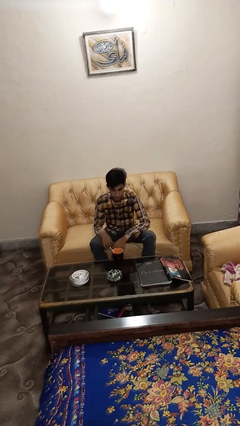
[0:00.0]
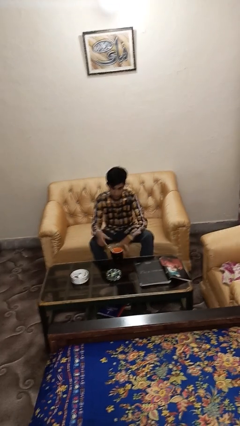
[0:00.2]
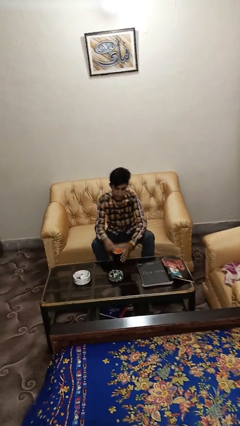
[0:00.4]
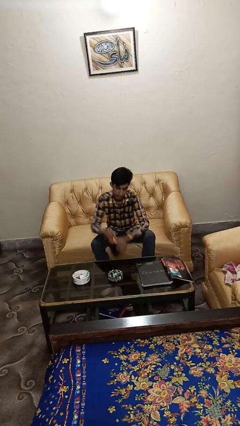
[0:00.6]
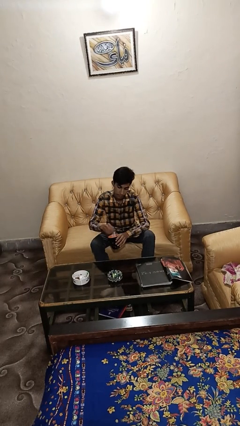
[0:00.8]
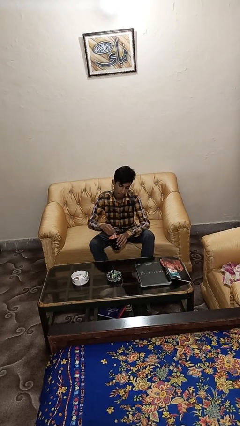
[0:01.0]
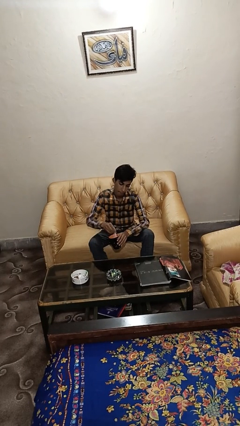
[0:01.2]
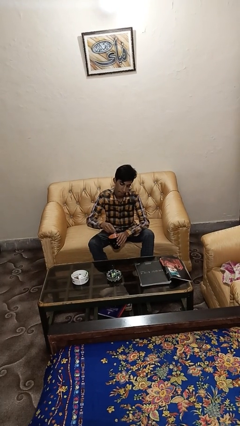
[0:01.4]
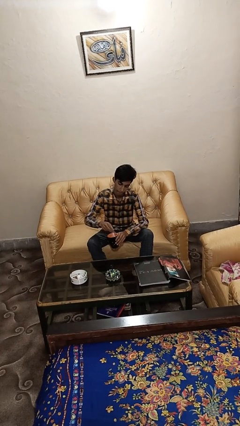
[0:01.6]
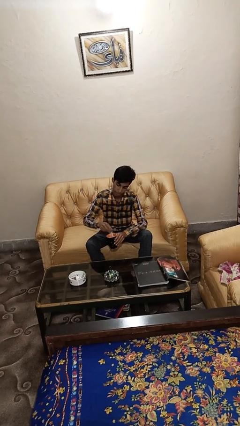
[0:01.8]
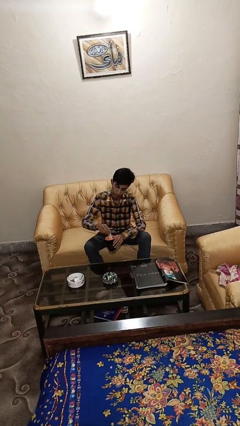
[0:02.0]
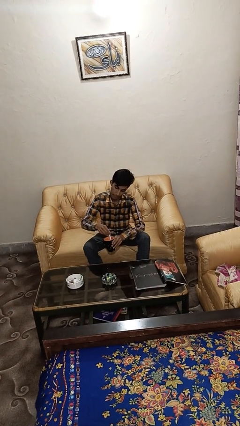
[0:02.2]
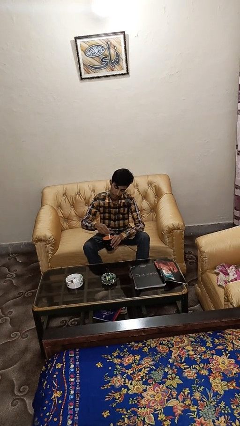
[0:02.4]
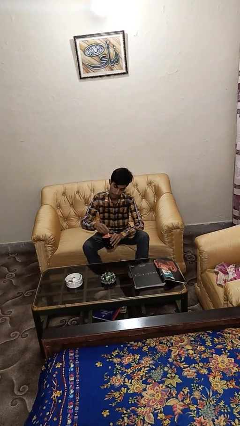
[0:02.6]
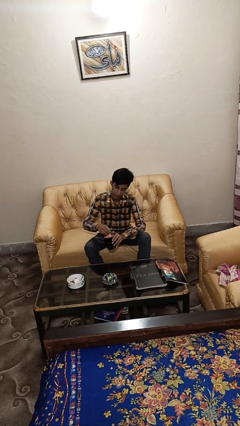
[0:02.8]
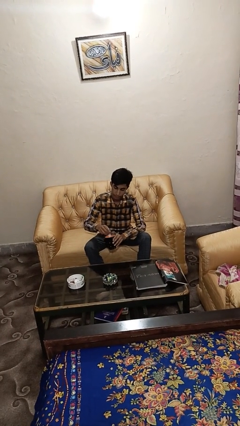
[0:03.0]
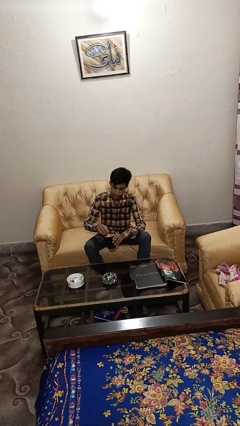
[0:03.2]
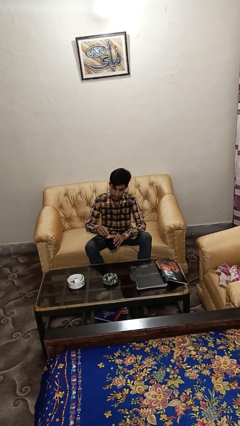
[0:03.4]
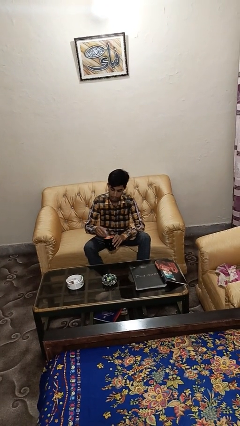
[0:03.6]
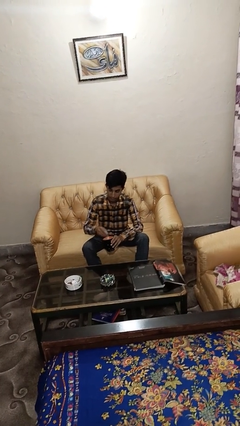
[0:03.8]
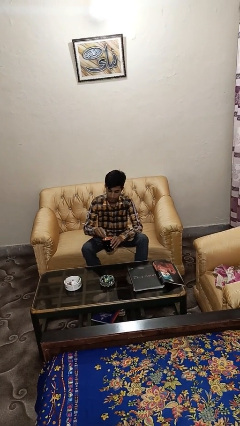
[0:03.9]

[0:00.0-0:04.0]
person stirs mug

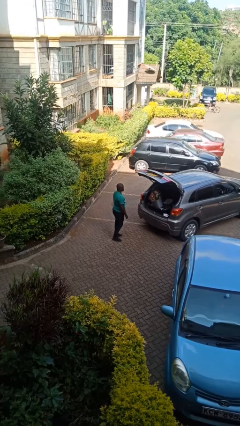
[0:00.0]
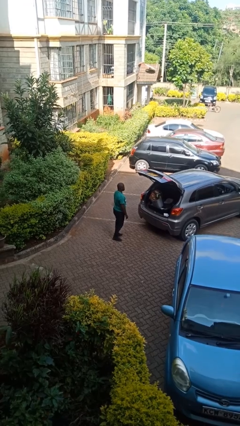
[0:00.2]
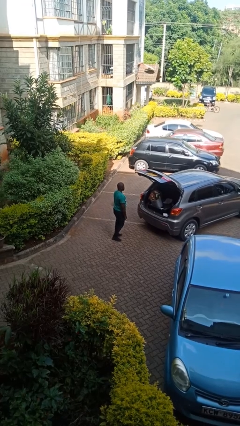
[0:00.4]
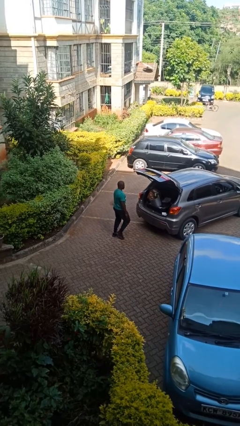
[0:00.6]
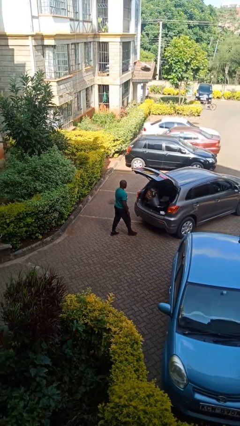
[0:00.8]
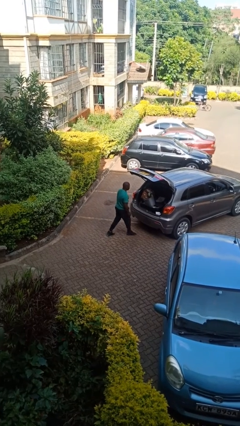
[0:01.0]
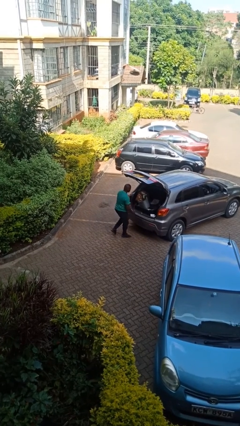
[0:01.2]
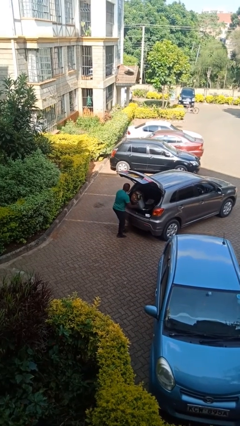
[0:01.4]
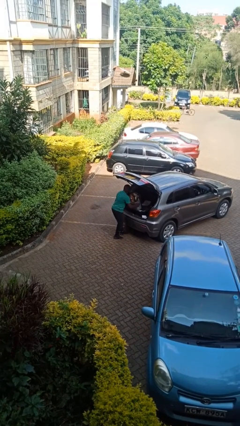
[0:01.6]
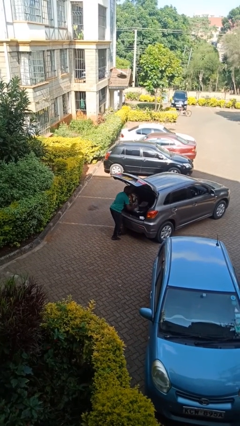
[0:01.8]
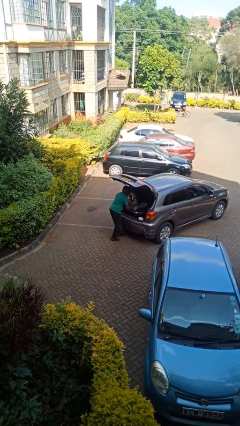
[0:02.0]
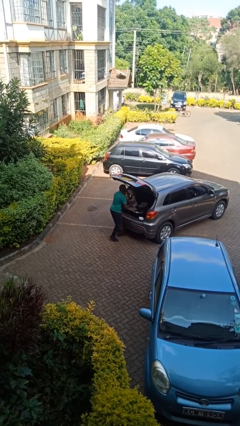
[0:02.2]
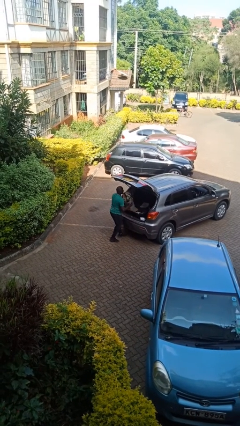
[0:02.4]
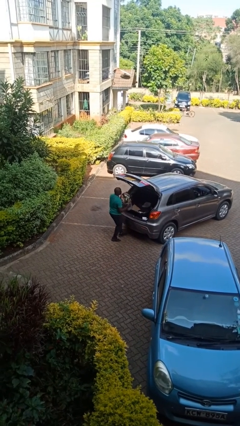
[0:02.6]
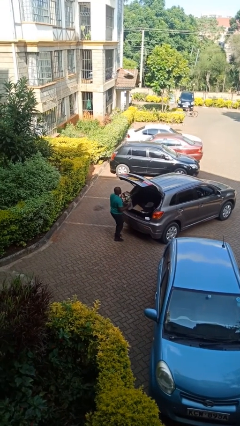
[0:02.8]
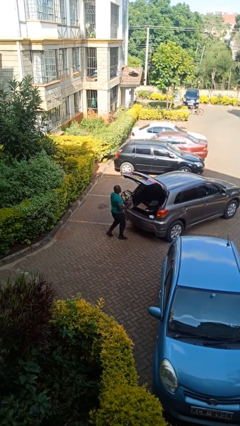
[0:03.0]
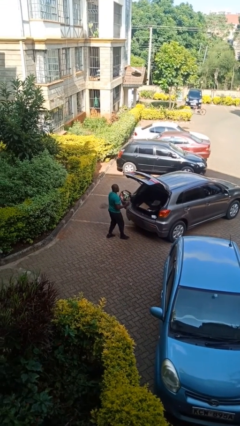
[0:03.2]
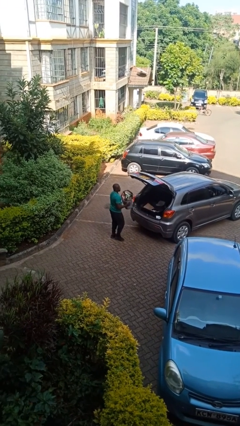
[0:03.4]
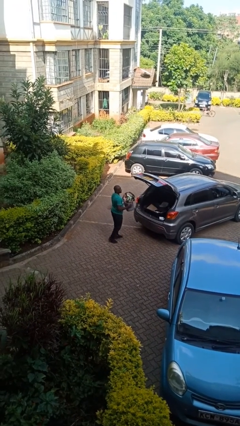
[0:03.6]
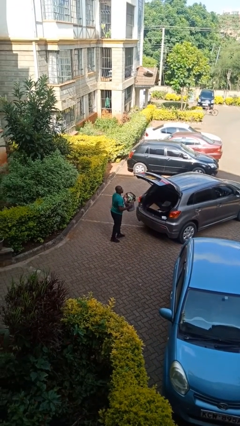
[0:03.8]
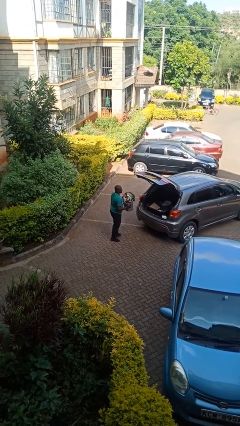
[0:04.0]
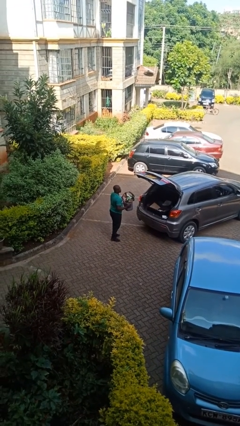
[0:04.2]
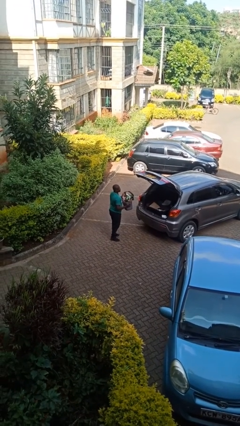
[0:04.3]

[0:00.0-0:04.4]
person unloads car

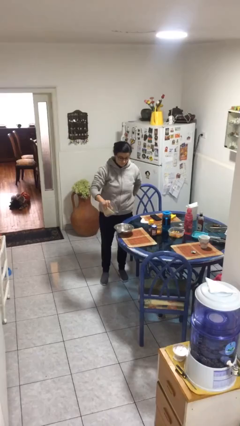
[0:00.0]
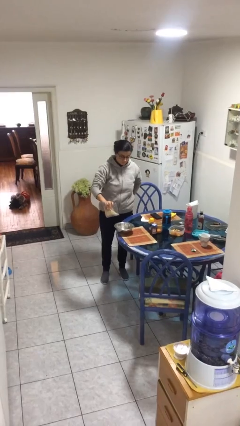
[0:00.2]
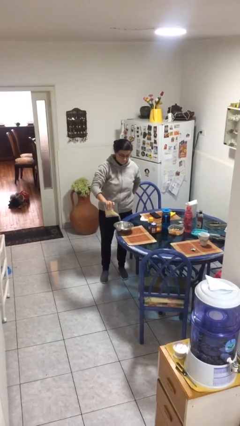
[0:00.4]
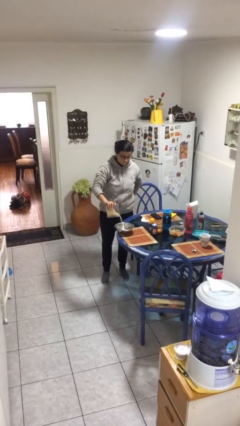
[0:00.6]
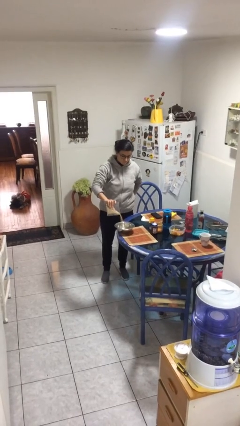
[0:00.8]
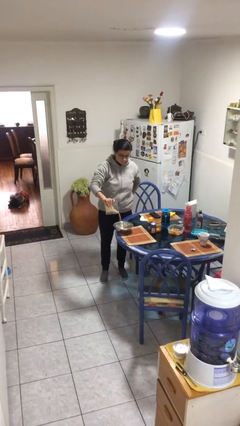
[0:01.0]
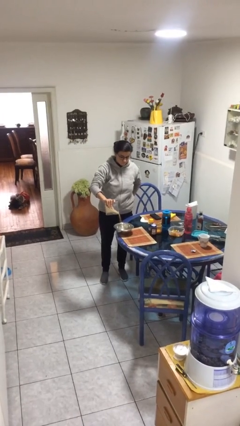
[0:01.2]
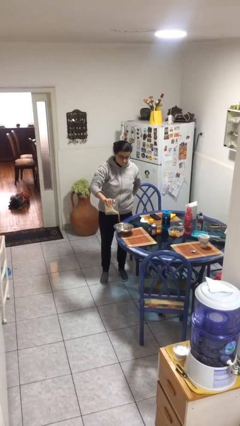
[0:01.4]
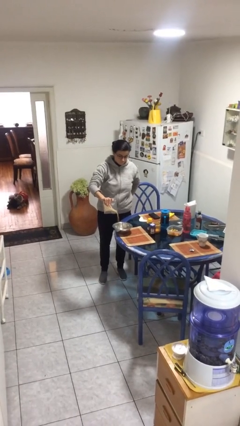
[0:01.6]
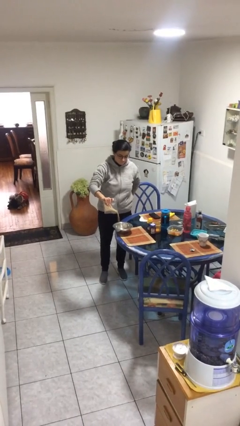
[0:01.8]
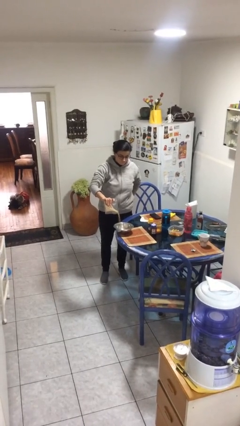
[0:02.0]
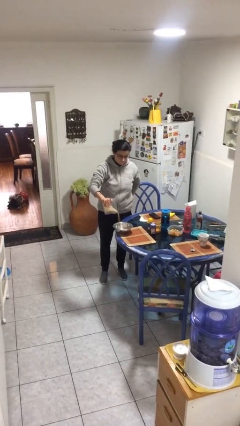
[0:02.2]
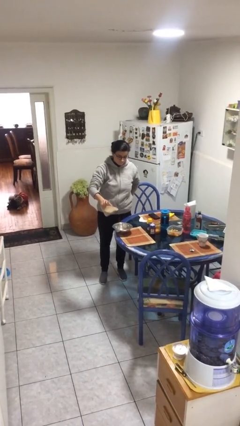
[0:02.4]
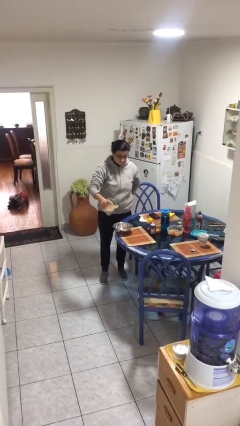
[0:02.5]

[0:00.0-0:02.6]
person pours into bowl

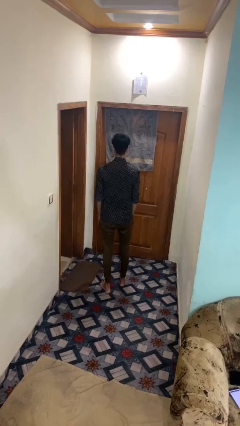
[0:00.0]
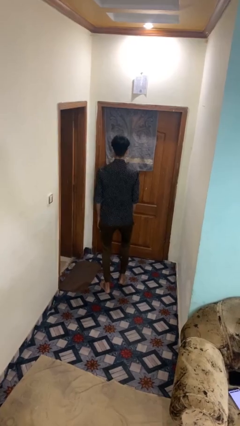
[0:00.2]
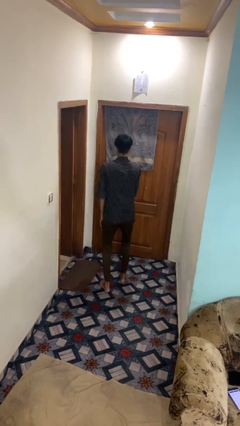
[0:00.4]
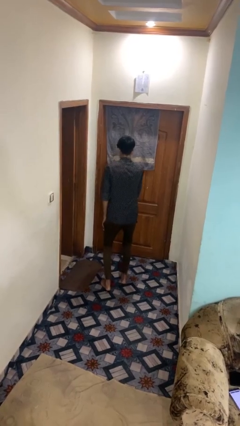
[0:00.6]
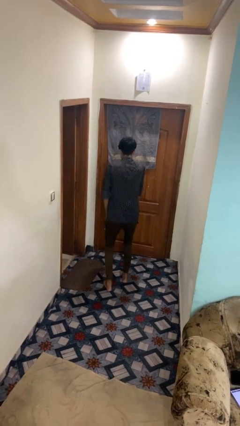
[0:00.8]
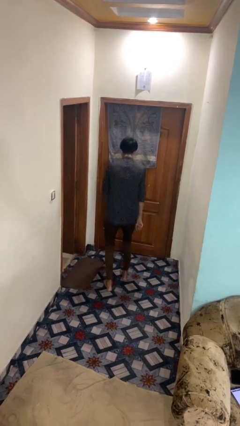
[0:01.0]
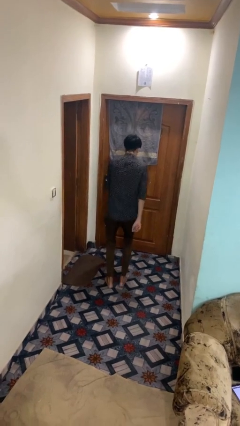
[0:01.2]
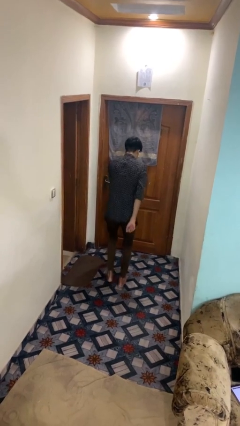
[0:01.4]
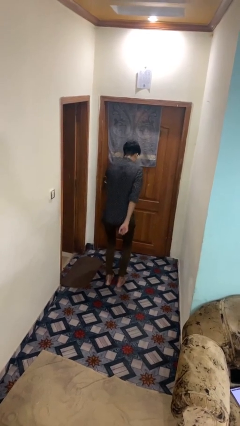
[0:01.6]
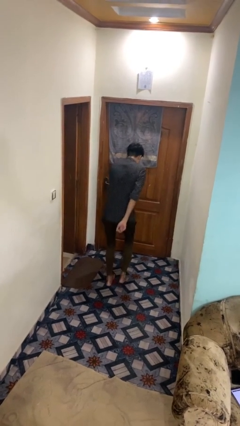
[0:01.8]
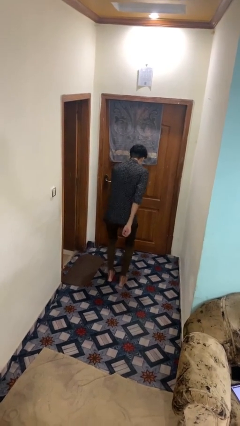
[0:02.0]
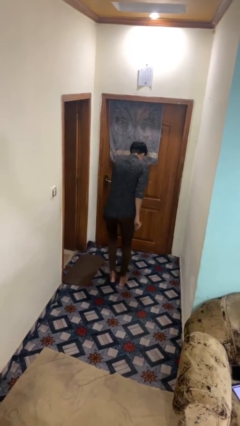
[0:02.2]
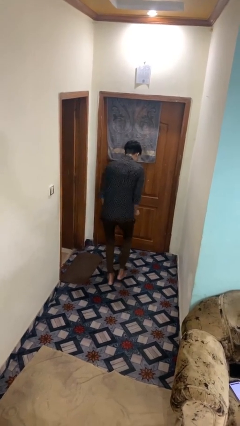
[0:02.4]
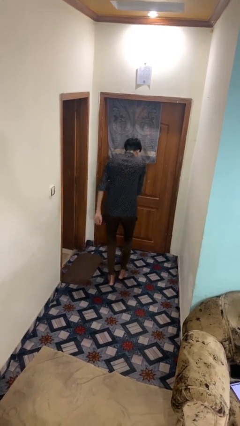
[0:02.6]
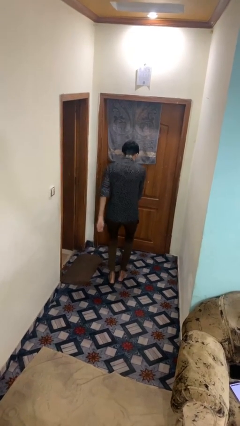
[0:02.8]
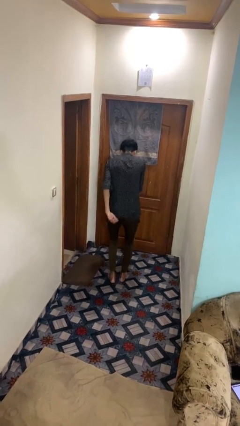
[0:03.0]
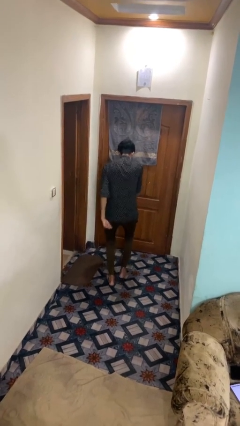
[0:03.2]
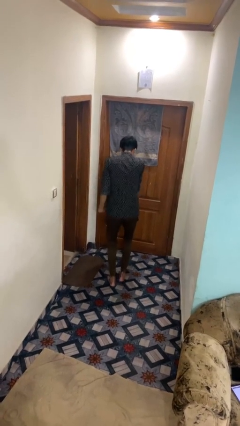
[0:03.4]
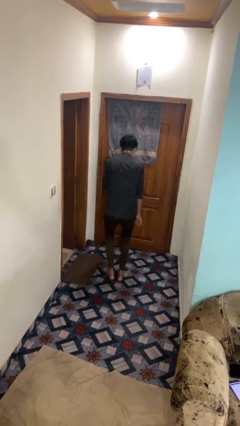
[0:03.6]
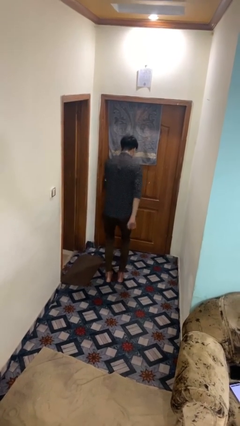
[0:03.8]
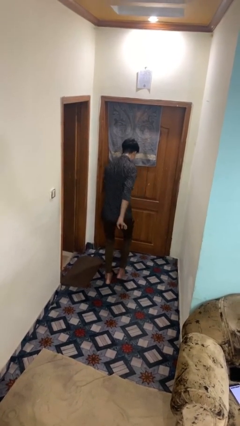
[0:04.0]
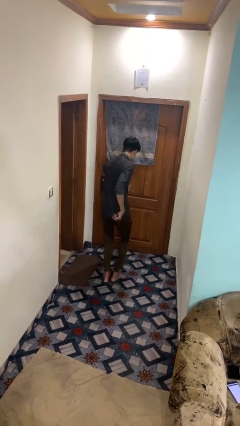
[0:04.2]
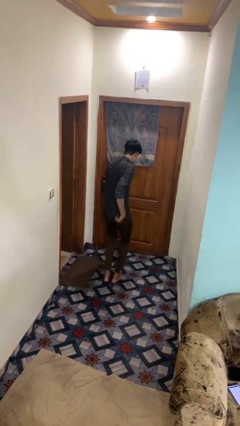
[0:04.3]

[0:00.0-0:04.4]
person dances in place

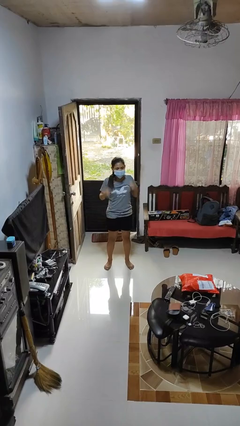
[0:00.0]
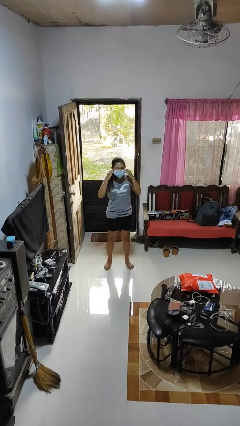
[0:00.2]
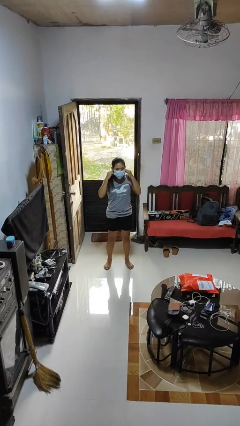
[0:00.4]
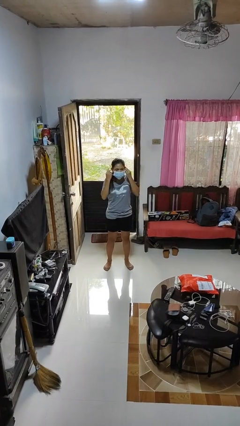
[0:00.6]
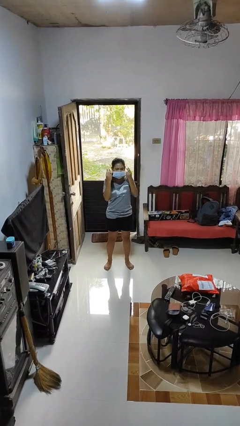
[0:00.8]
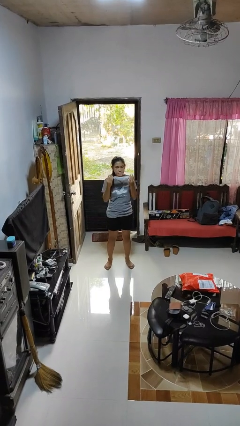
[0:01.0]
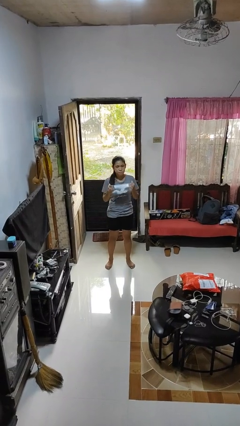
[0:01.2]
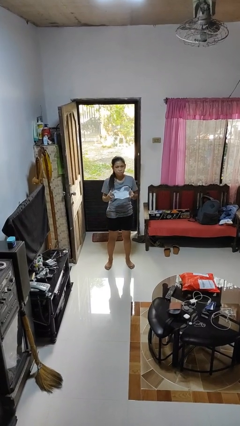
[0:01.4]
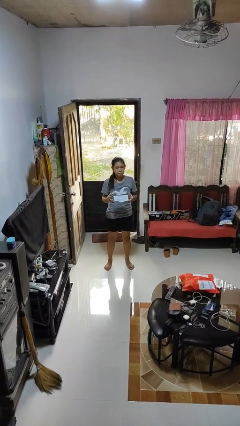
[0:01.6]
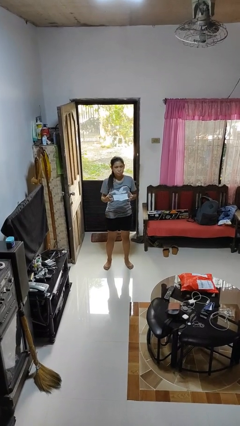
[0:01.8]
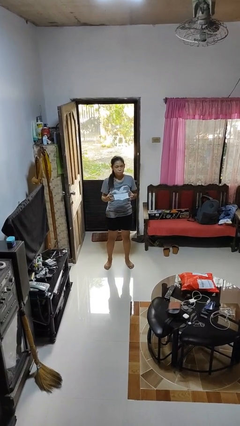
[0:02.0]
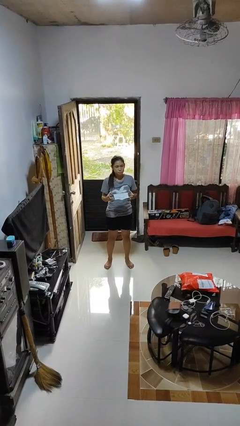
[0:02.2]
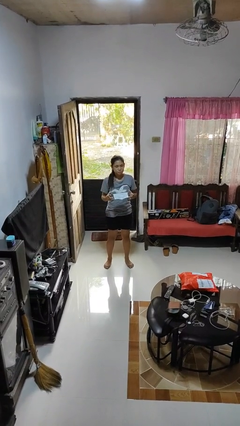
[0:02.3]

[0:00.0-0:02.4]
person takes off facemask
